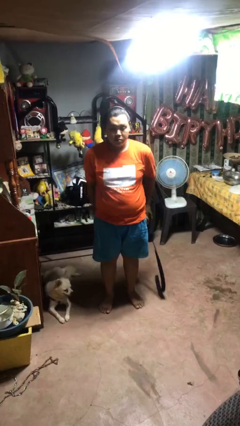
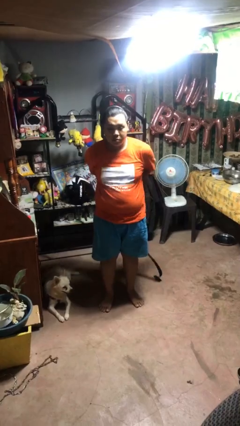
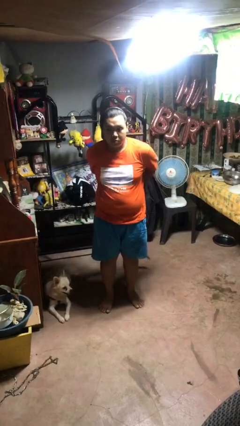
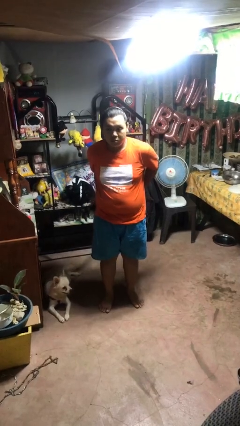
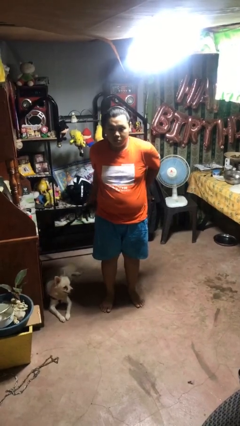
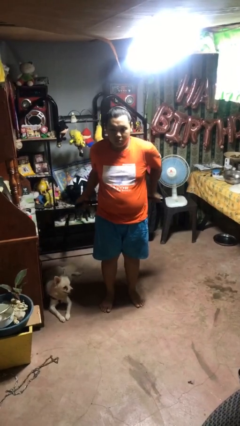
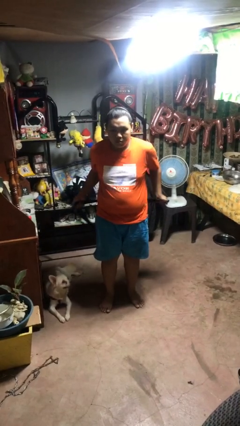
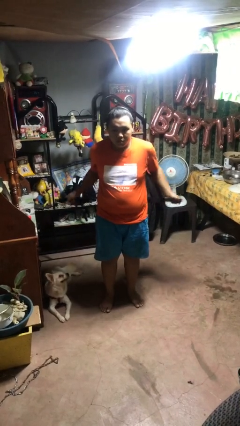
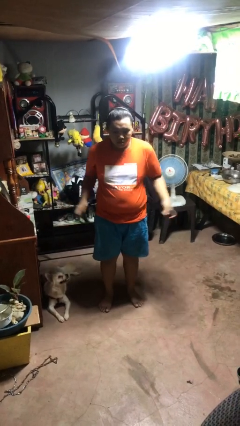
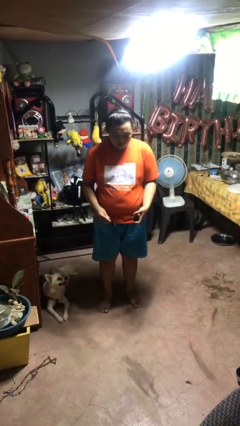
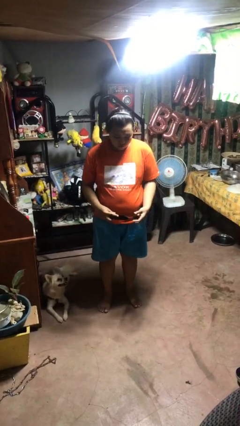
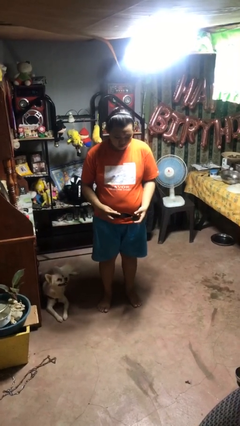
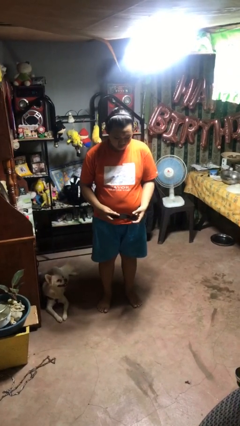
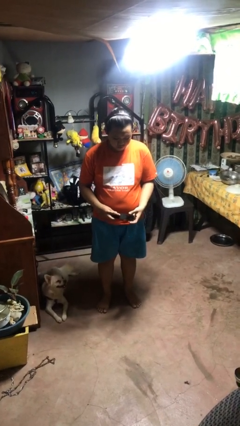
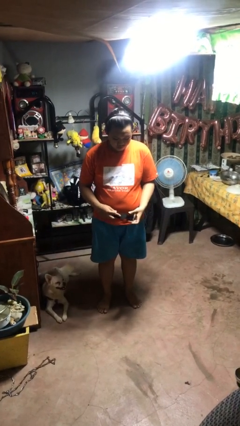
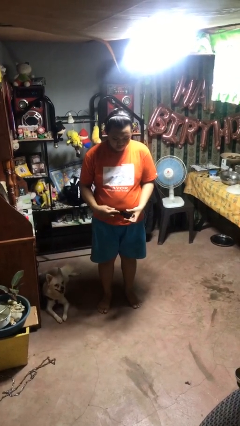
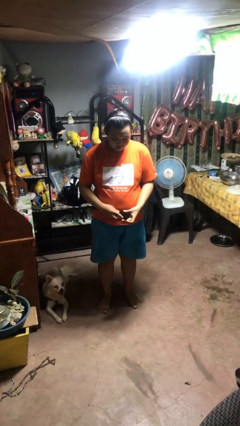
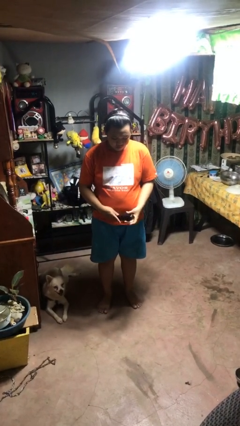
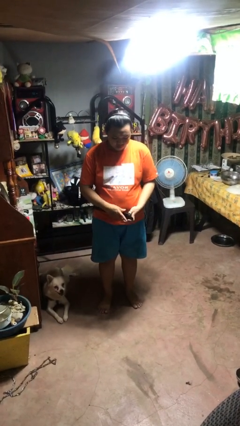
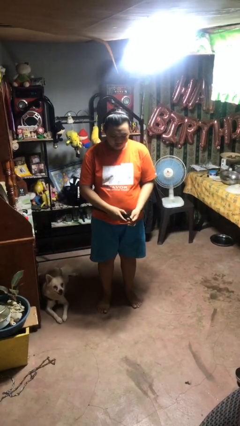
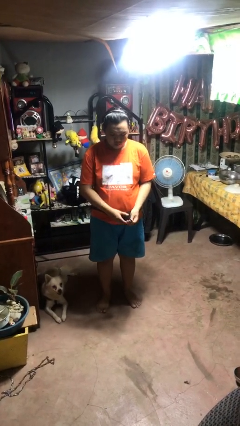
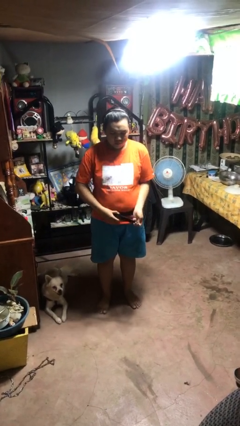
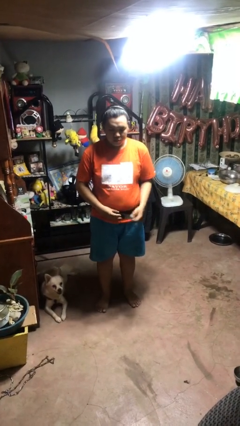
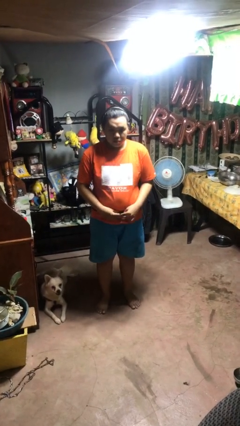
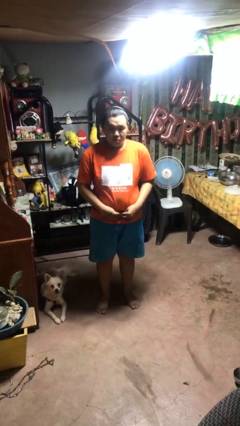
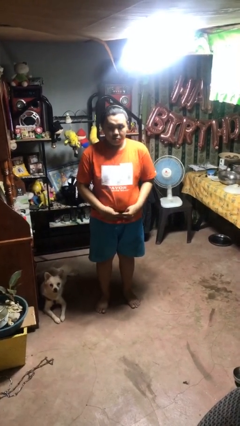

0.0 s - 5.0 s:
person puts on belt

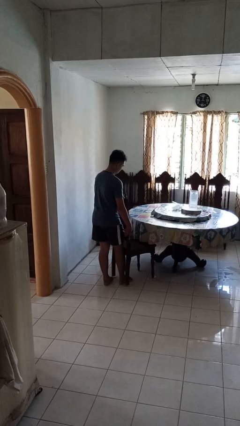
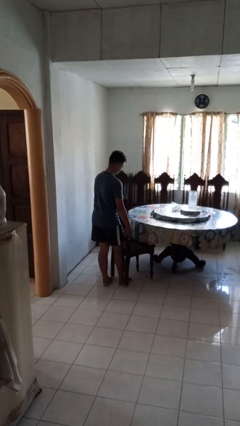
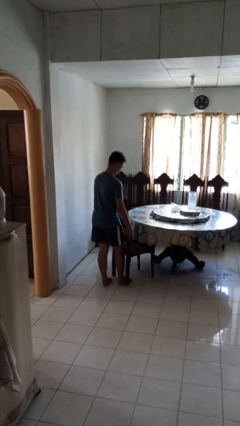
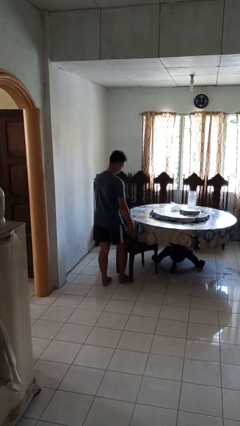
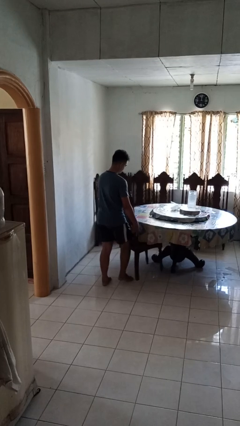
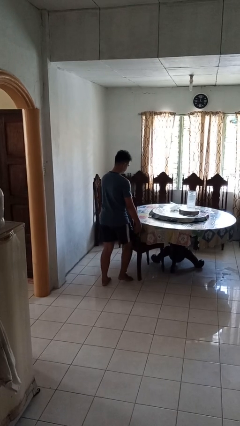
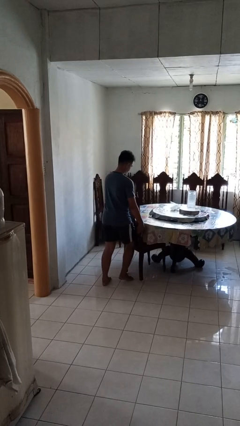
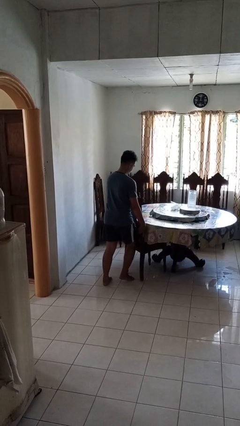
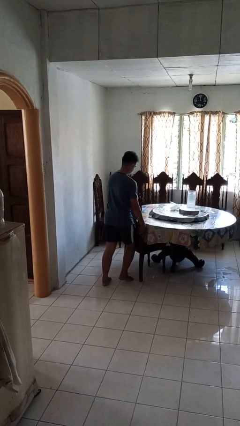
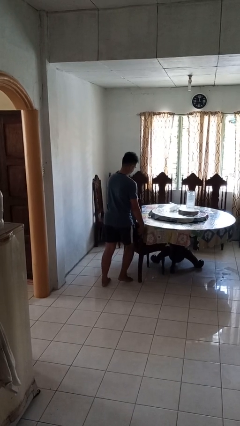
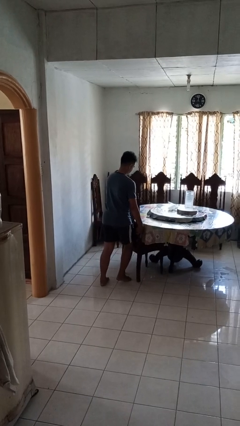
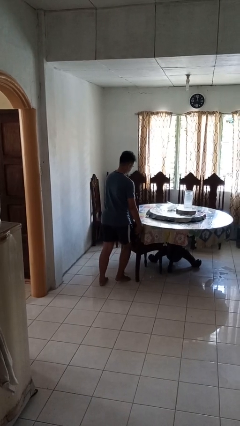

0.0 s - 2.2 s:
person pushes in chair

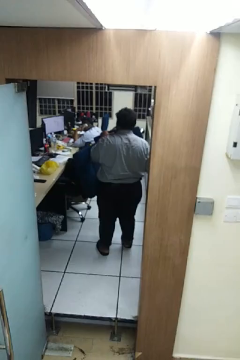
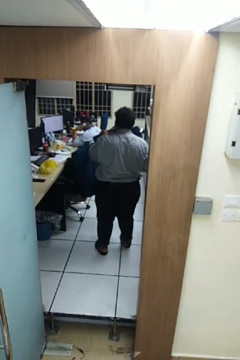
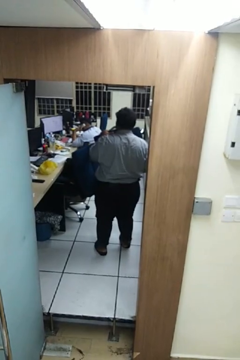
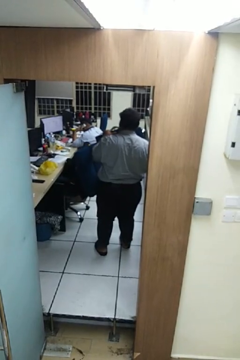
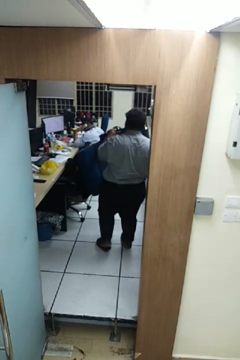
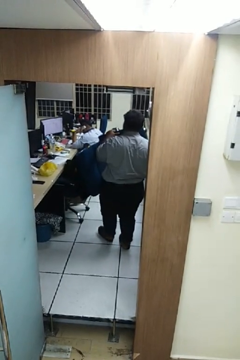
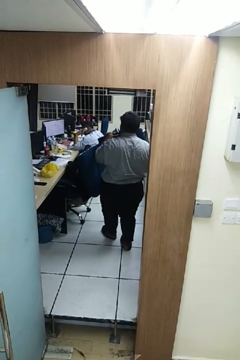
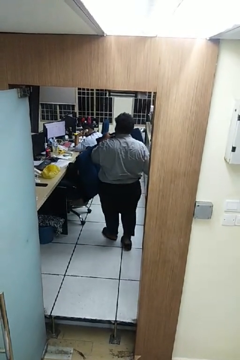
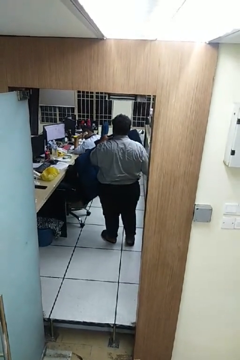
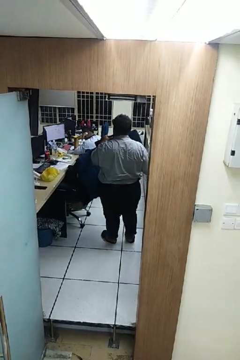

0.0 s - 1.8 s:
person carries furniture

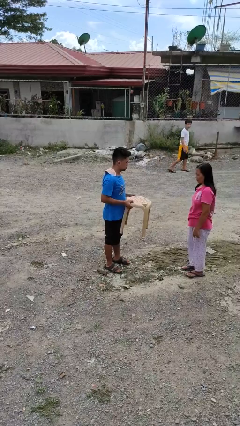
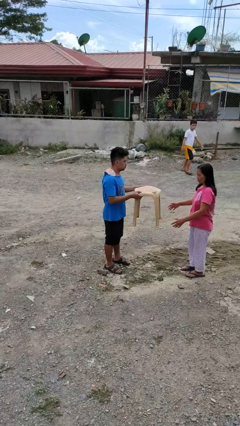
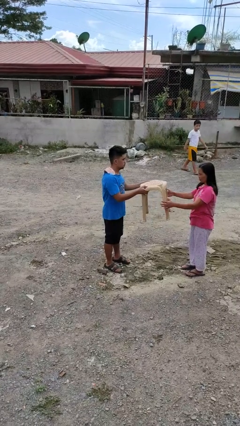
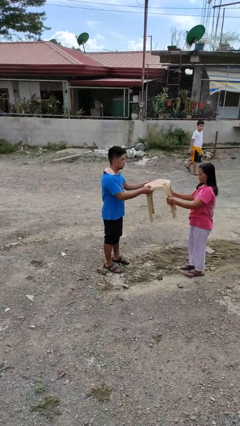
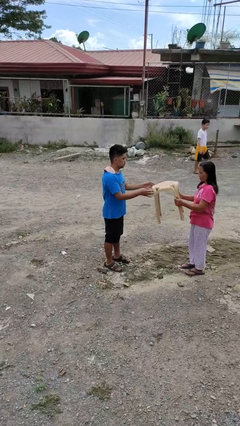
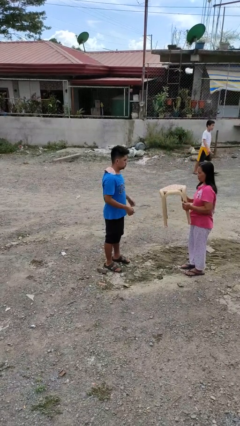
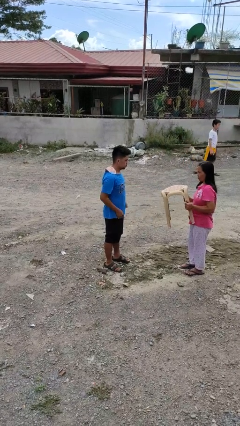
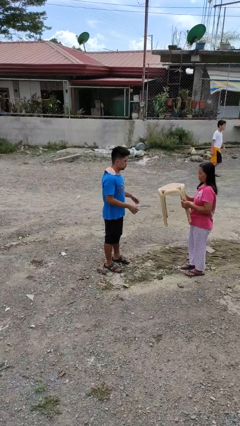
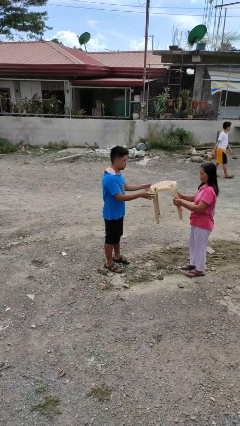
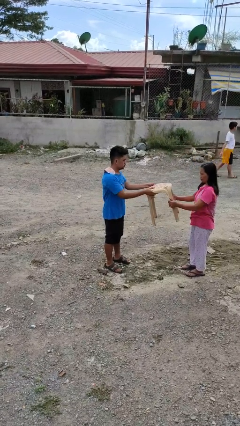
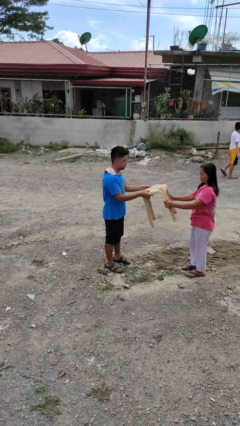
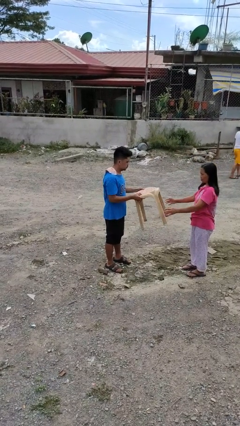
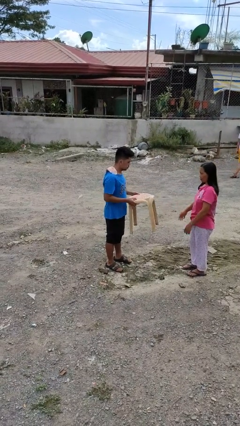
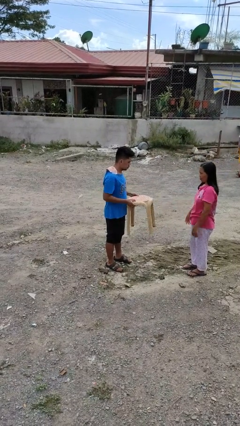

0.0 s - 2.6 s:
person transfers object to person

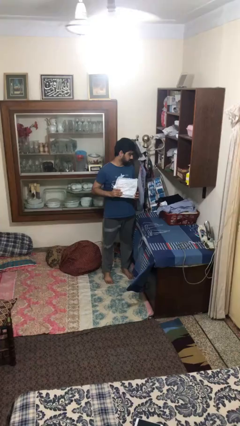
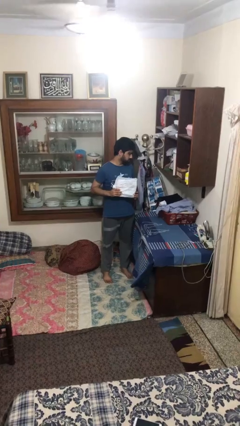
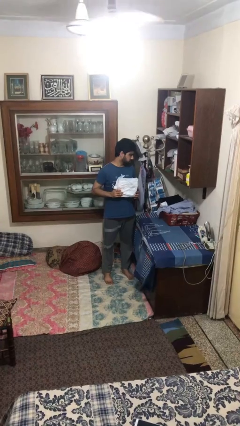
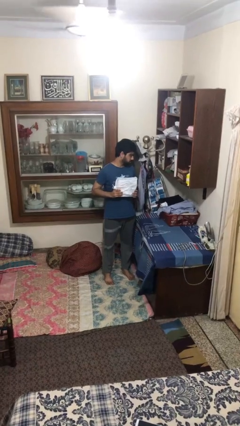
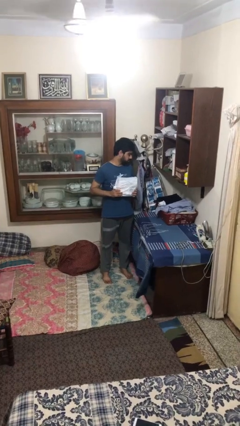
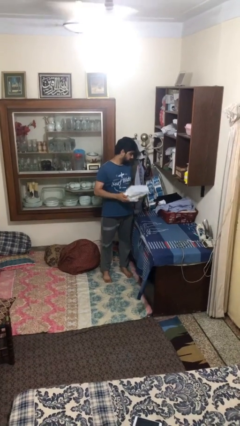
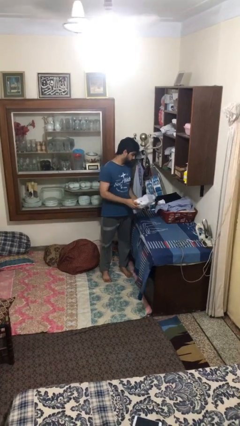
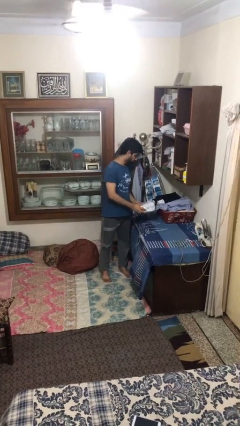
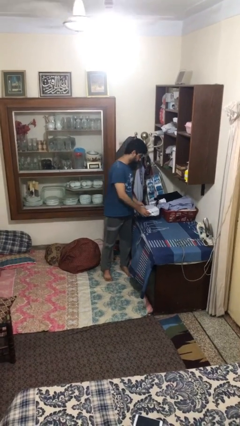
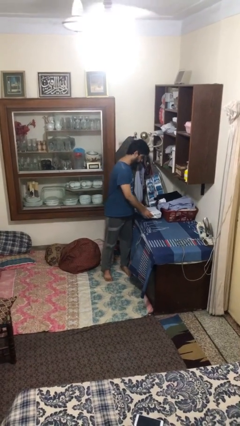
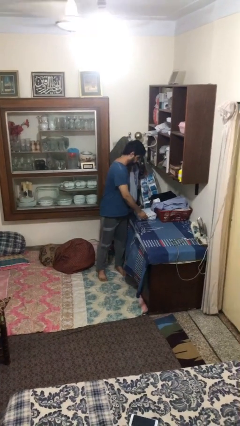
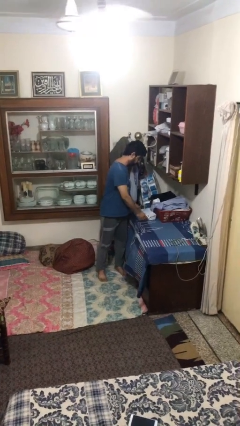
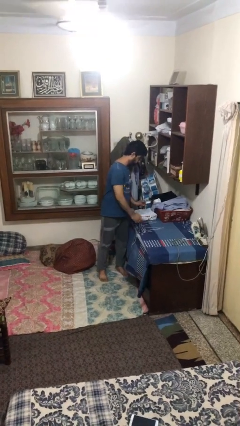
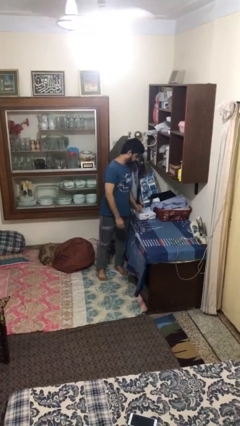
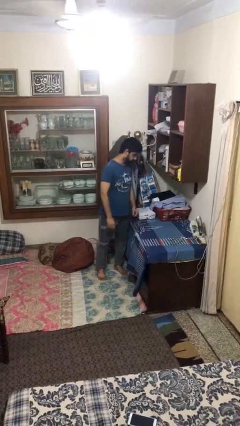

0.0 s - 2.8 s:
person puts down object on table

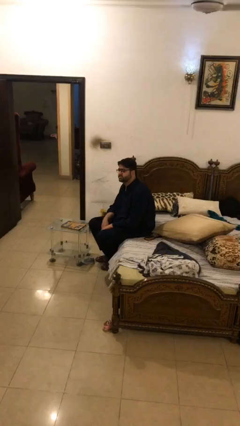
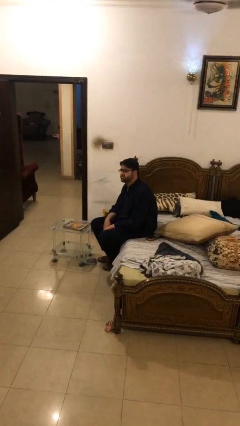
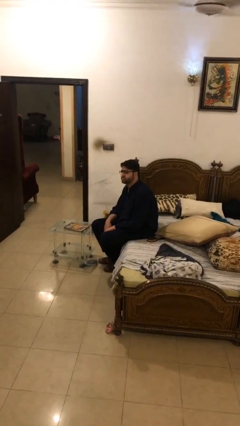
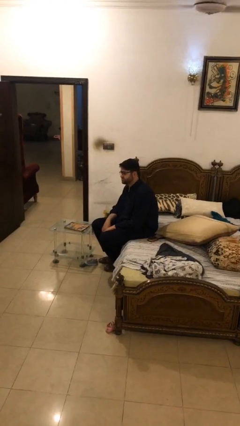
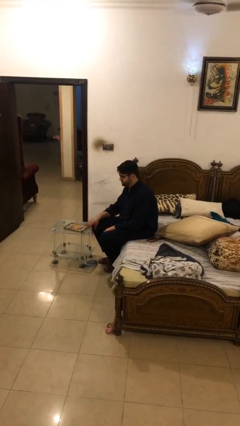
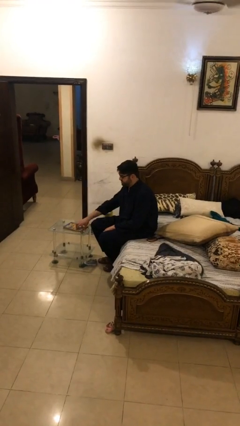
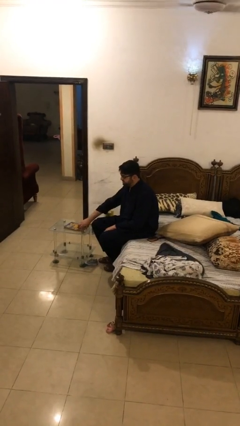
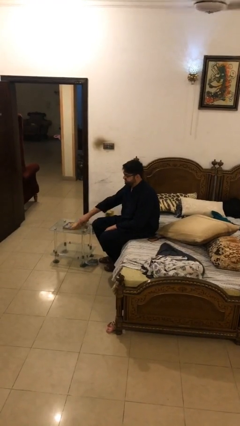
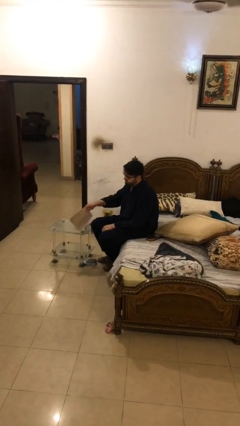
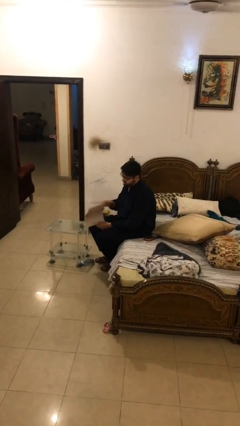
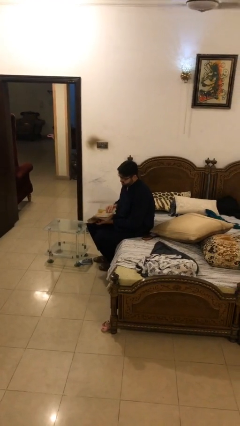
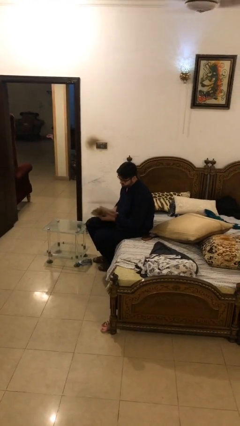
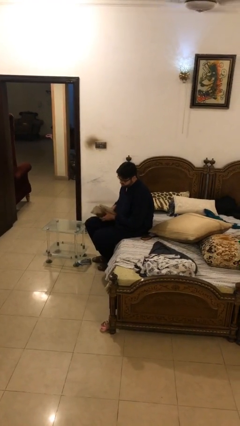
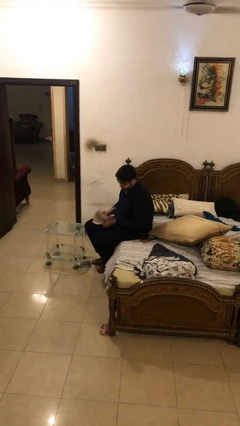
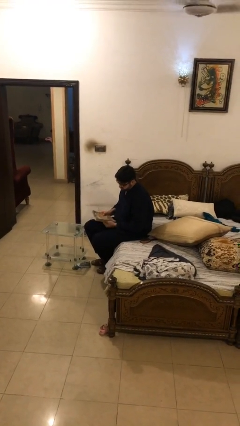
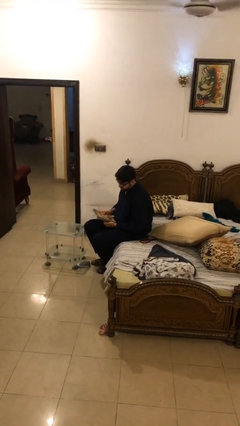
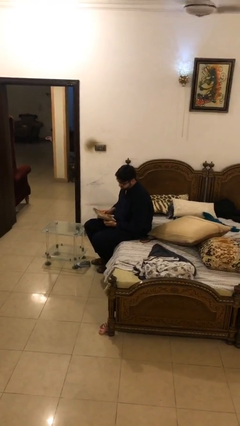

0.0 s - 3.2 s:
person picks up object from table

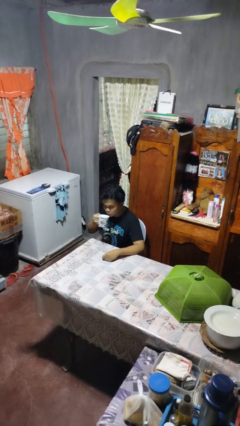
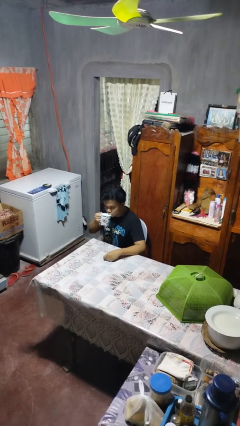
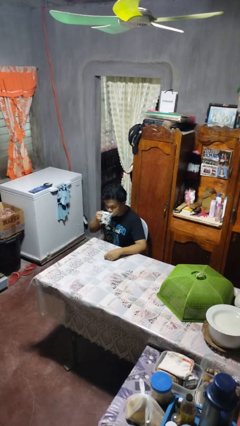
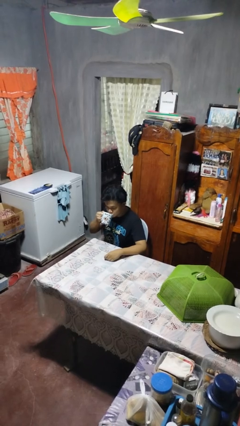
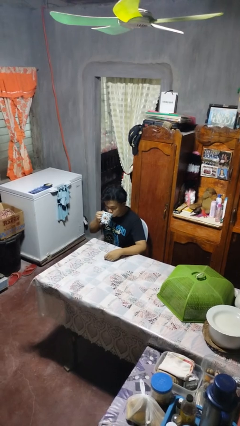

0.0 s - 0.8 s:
person drinks from mug
